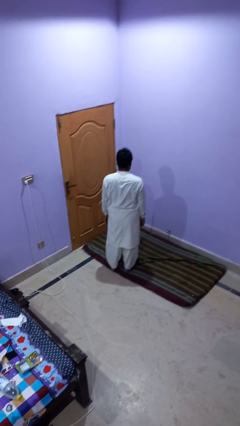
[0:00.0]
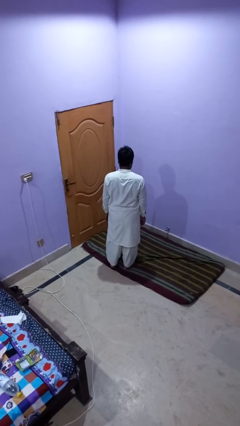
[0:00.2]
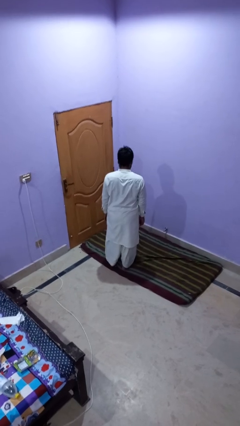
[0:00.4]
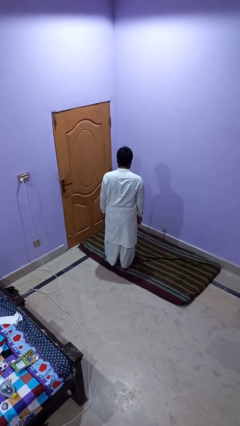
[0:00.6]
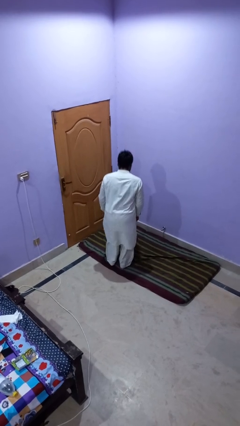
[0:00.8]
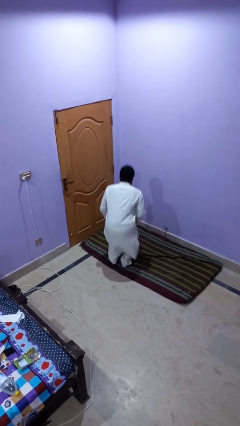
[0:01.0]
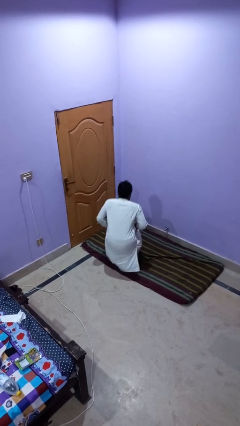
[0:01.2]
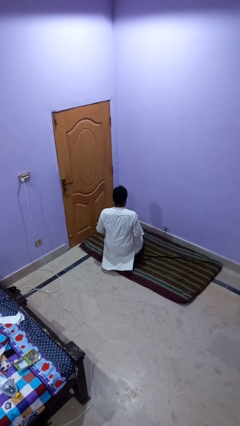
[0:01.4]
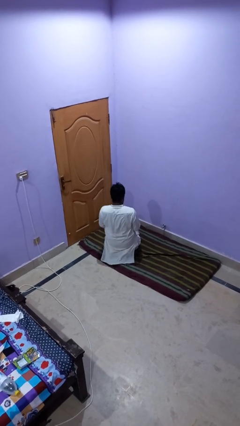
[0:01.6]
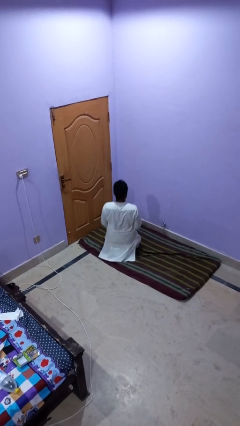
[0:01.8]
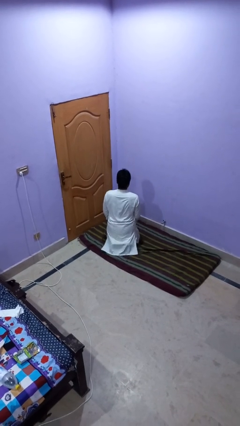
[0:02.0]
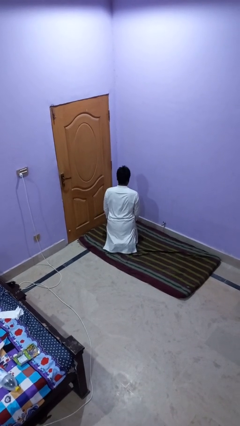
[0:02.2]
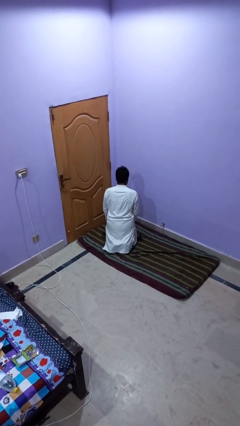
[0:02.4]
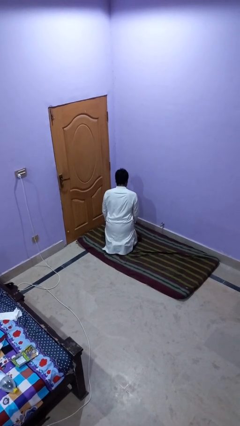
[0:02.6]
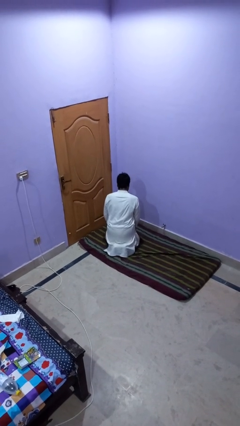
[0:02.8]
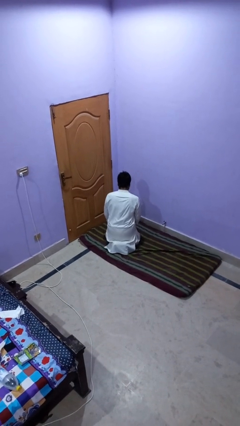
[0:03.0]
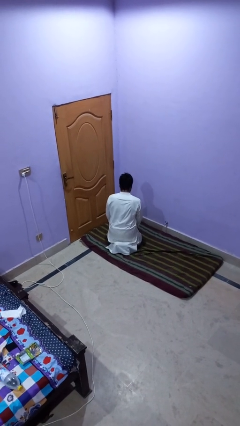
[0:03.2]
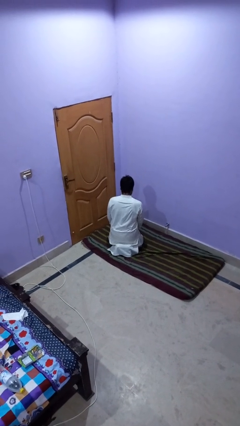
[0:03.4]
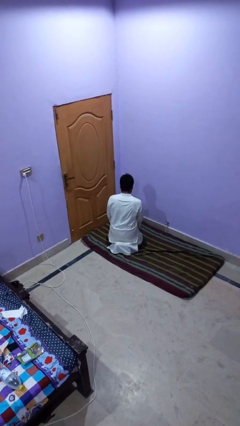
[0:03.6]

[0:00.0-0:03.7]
person kneels

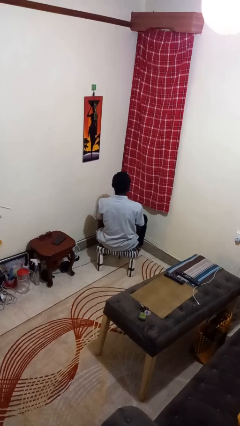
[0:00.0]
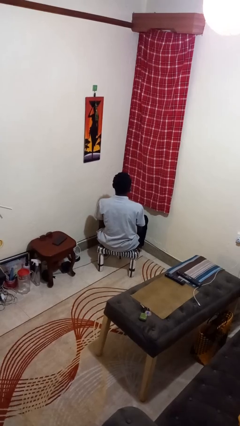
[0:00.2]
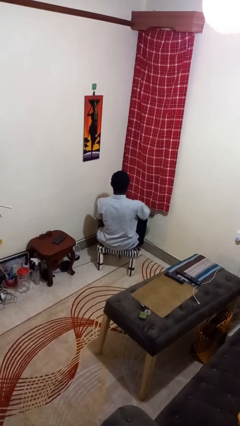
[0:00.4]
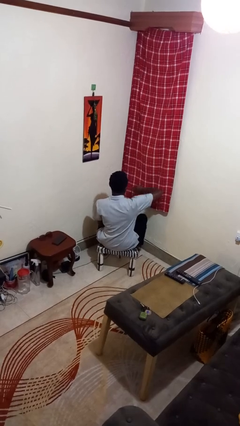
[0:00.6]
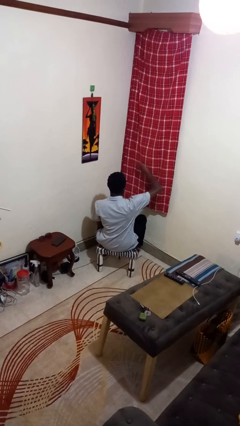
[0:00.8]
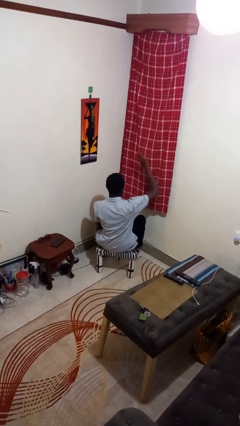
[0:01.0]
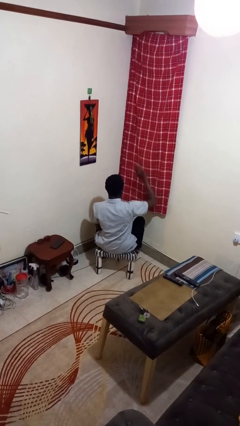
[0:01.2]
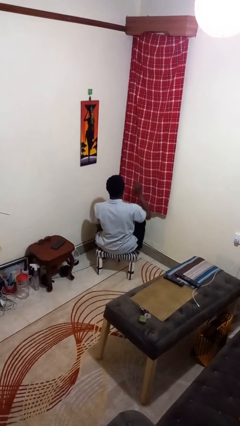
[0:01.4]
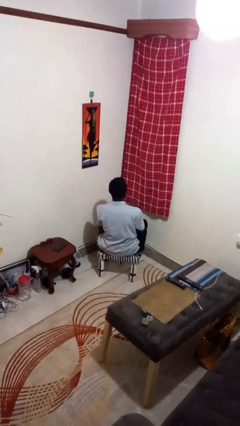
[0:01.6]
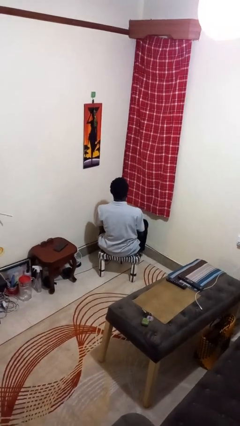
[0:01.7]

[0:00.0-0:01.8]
person gestures swipe up

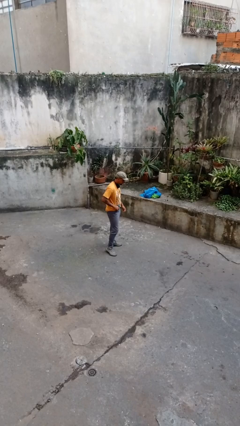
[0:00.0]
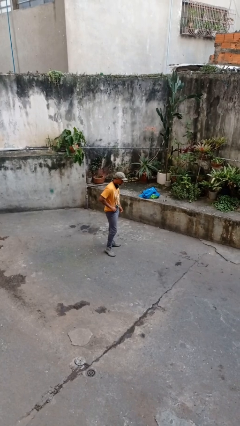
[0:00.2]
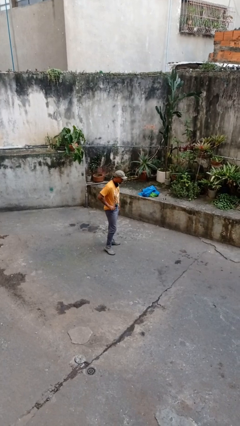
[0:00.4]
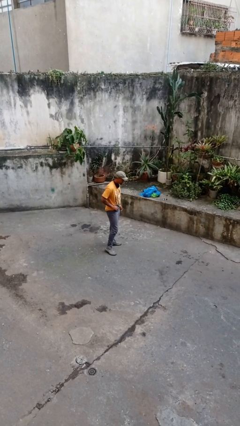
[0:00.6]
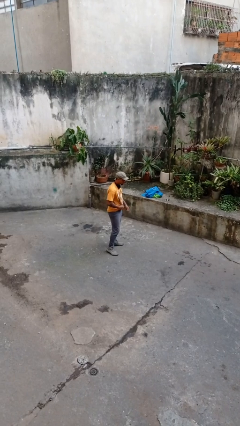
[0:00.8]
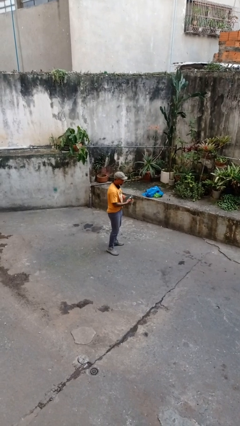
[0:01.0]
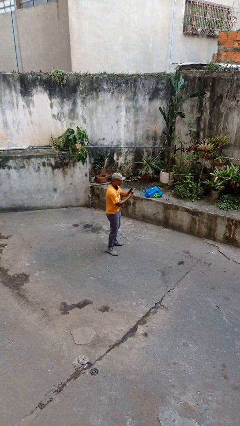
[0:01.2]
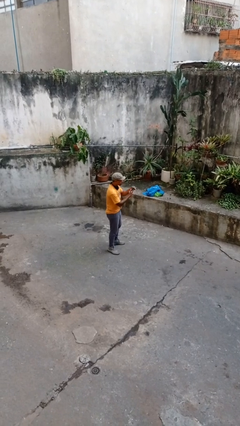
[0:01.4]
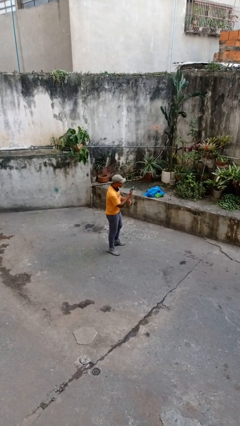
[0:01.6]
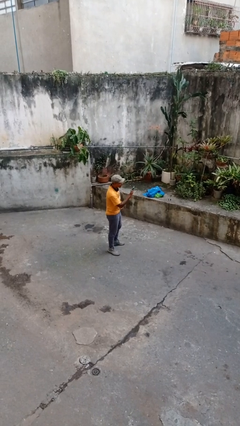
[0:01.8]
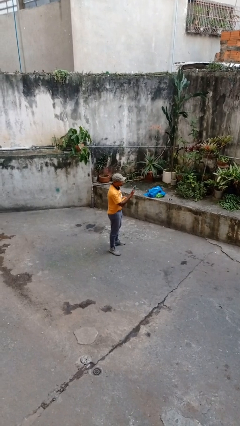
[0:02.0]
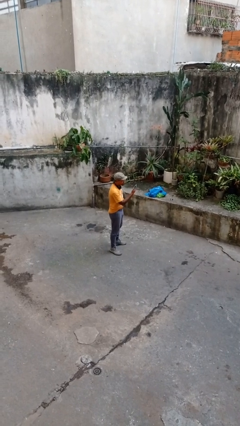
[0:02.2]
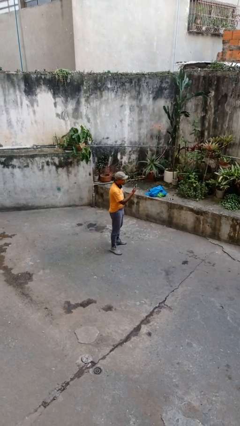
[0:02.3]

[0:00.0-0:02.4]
person takes phone from pocket

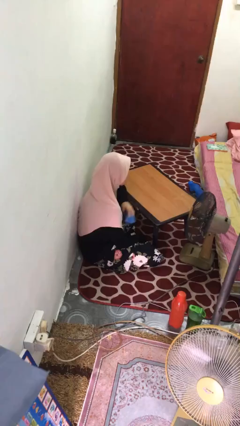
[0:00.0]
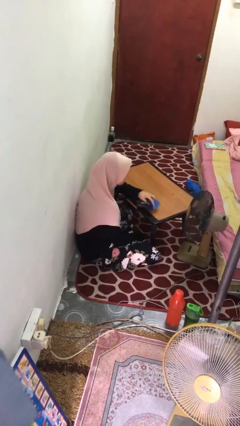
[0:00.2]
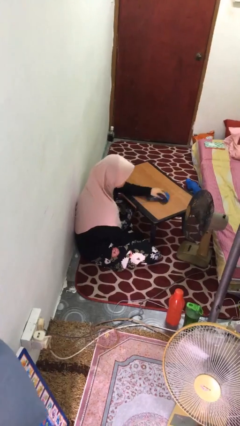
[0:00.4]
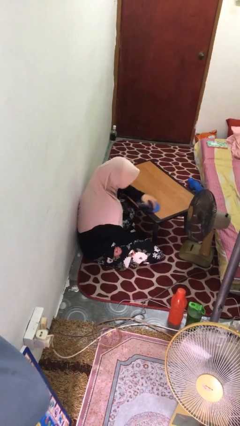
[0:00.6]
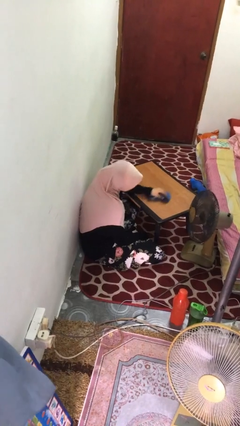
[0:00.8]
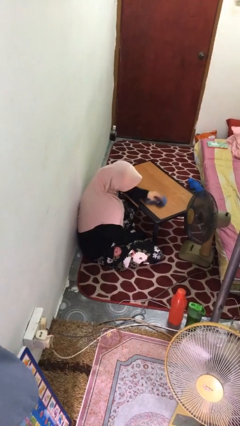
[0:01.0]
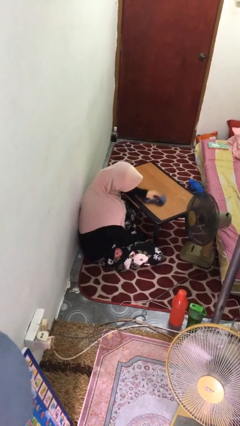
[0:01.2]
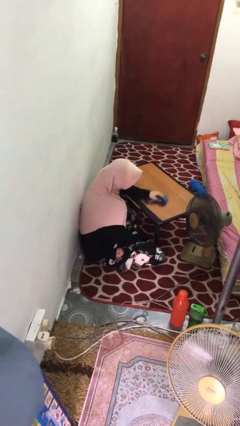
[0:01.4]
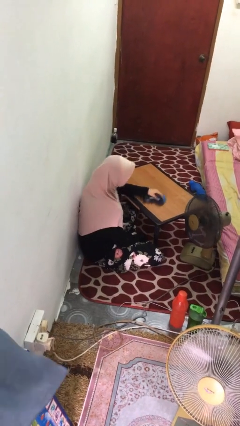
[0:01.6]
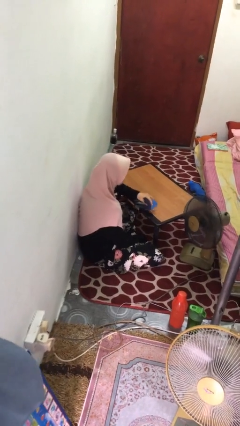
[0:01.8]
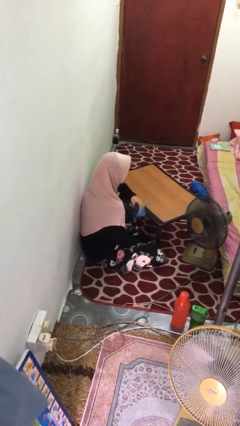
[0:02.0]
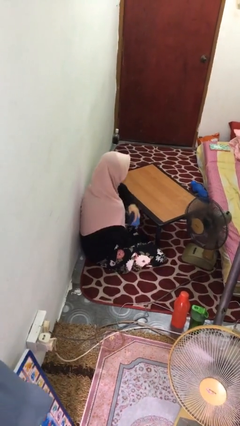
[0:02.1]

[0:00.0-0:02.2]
person cleans table with rag

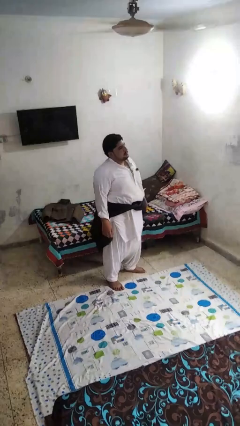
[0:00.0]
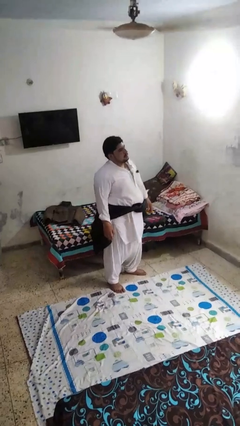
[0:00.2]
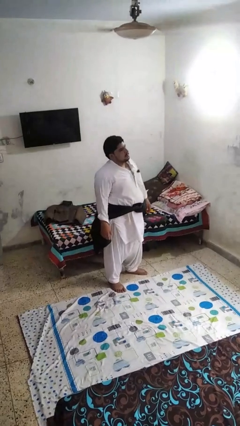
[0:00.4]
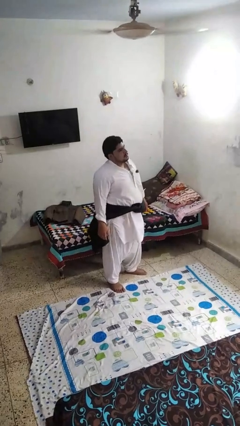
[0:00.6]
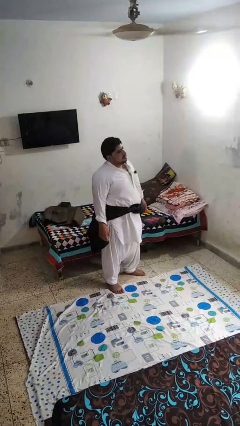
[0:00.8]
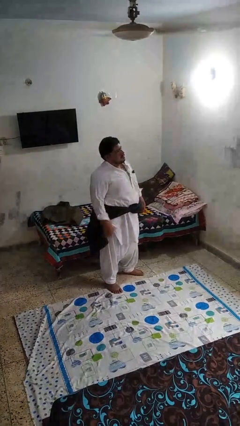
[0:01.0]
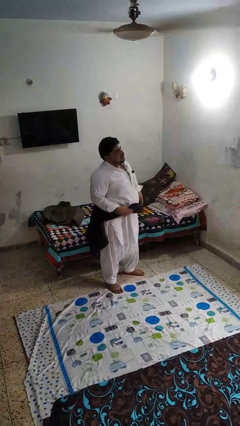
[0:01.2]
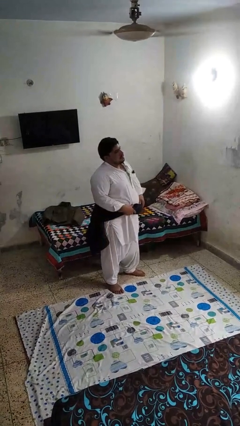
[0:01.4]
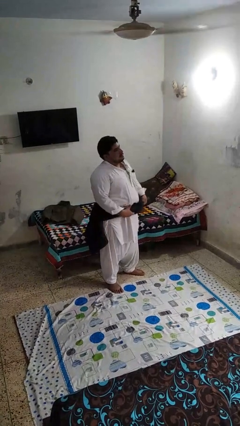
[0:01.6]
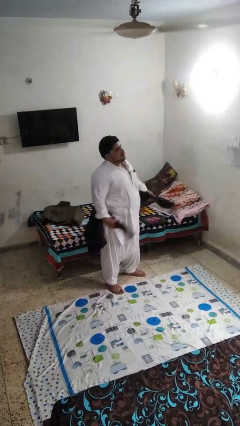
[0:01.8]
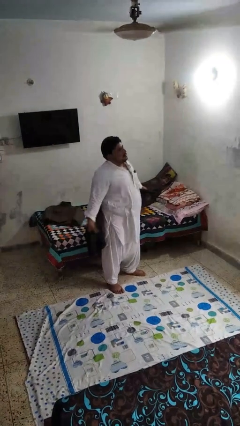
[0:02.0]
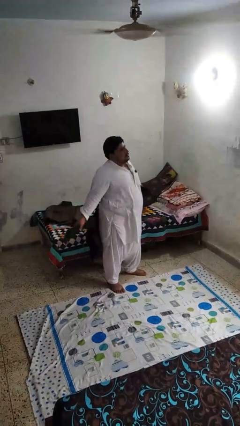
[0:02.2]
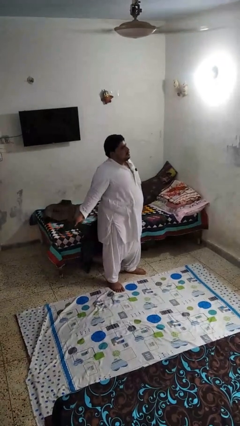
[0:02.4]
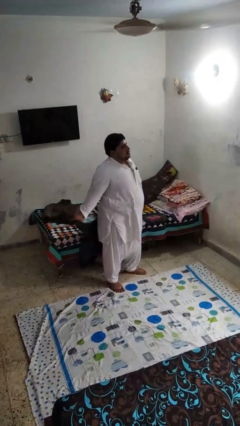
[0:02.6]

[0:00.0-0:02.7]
person unties jacket around waist

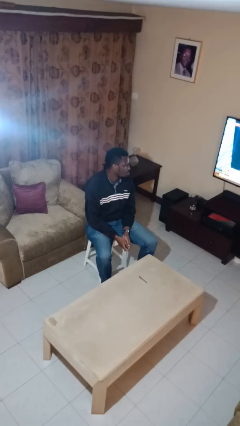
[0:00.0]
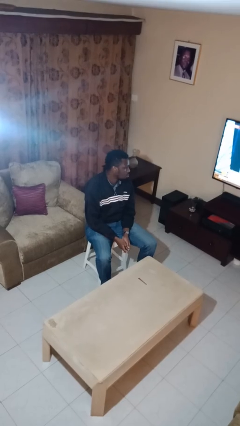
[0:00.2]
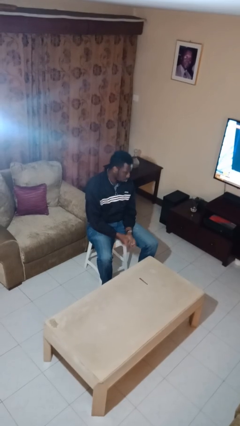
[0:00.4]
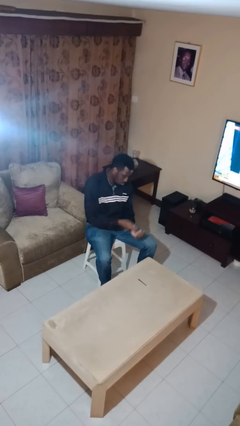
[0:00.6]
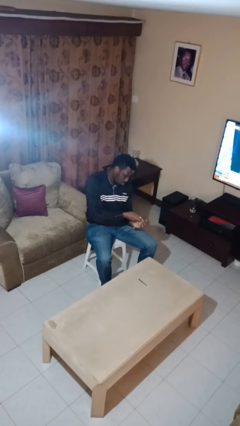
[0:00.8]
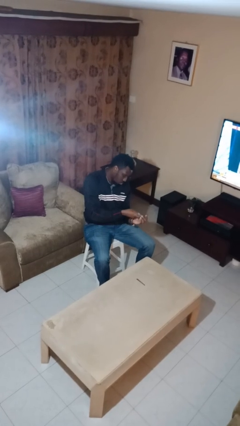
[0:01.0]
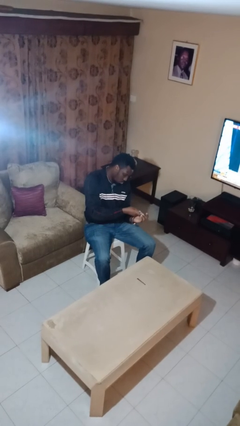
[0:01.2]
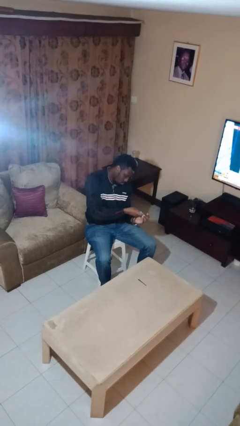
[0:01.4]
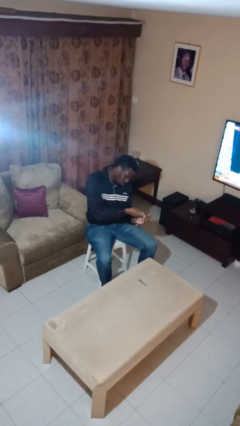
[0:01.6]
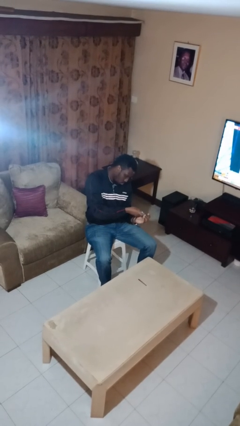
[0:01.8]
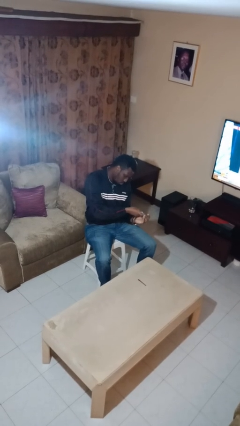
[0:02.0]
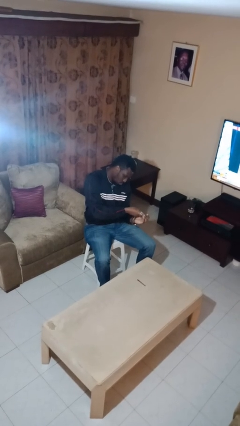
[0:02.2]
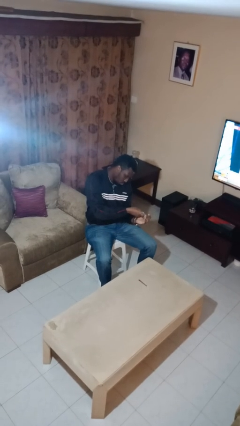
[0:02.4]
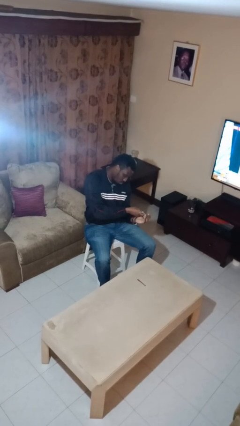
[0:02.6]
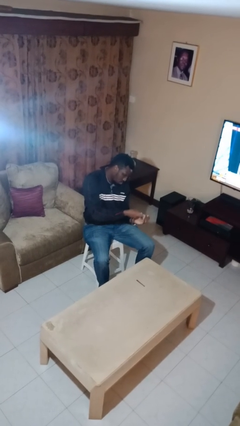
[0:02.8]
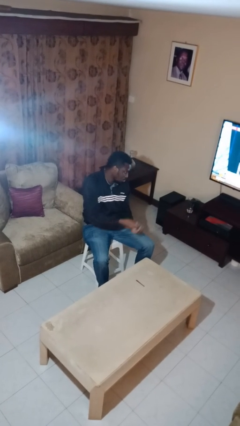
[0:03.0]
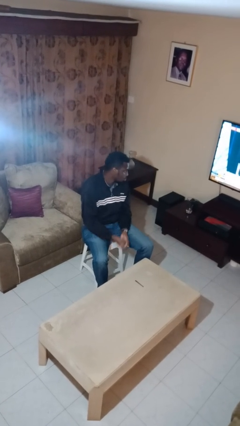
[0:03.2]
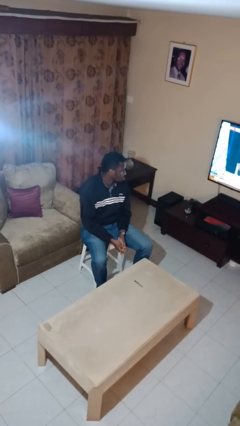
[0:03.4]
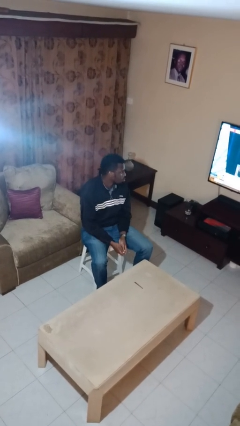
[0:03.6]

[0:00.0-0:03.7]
person clips fingernails

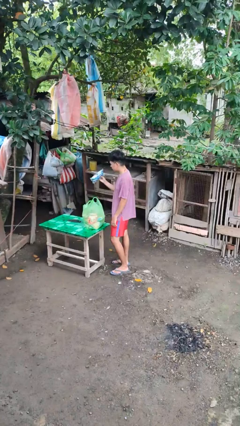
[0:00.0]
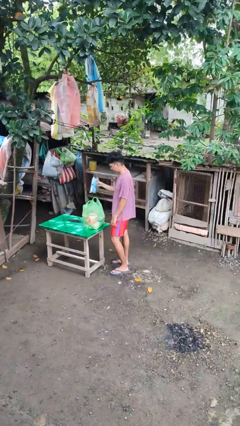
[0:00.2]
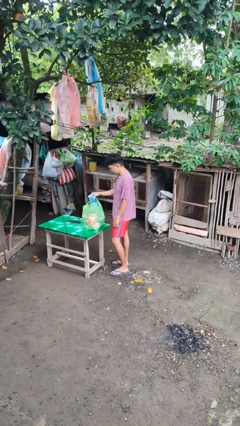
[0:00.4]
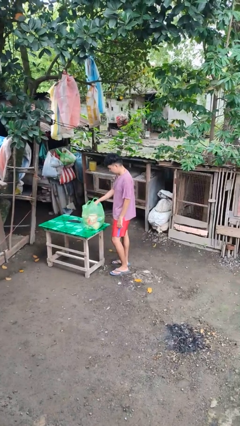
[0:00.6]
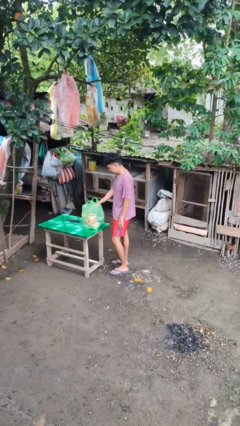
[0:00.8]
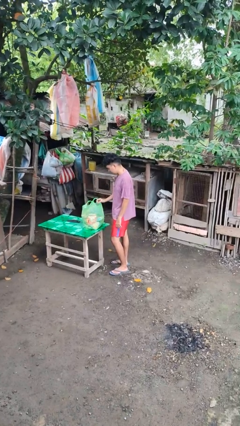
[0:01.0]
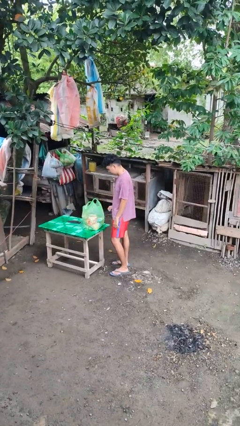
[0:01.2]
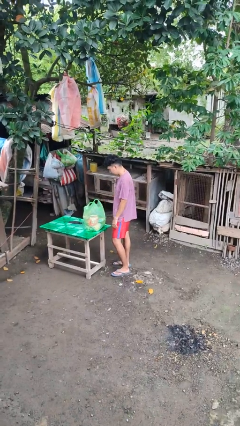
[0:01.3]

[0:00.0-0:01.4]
person puts object into bag
